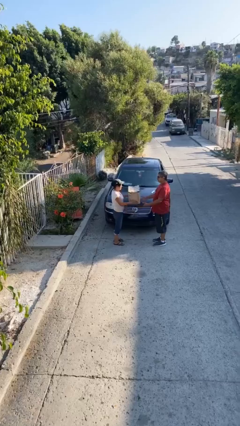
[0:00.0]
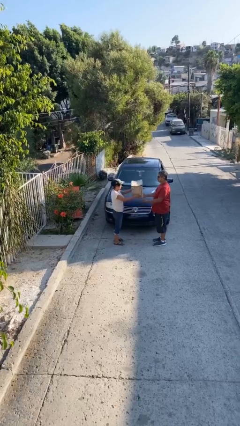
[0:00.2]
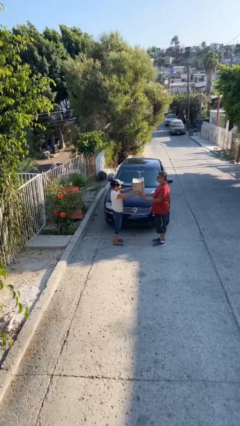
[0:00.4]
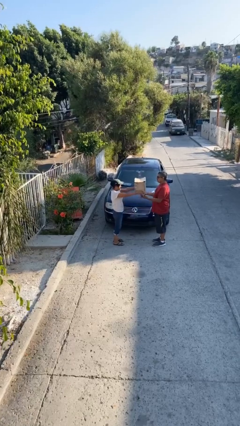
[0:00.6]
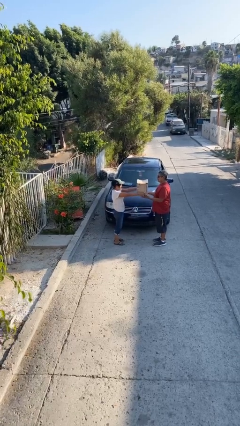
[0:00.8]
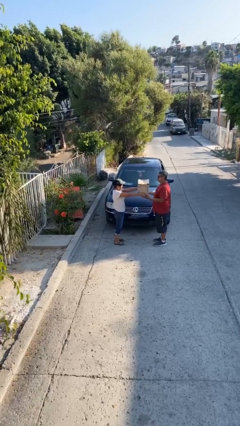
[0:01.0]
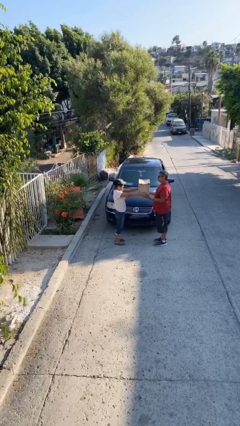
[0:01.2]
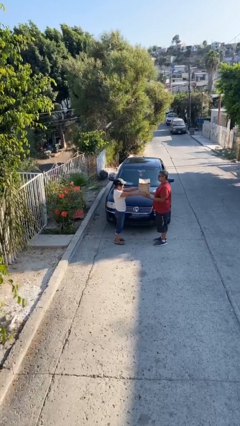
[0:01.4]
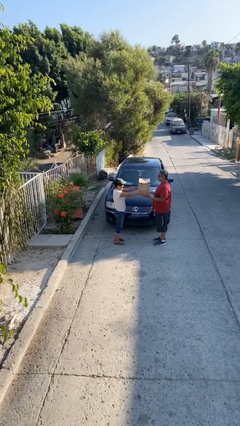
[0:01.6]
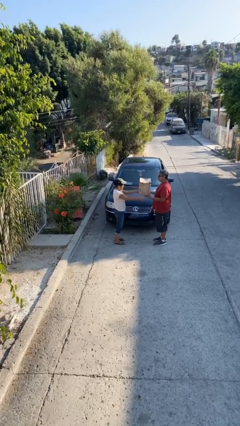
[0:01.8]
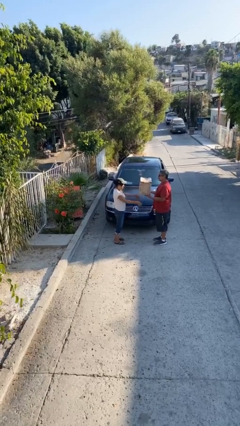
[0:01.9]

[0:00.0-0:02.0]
person transfers object to person

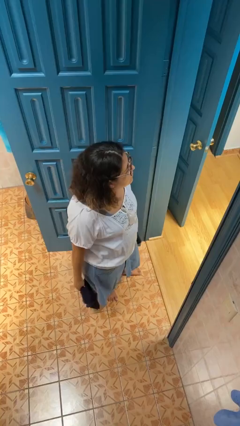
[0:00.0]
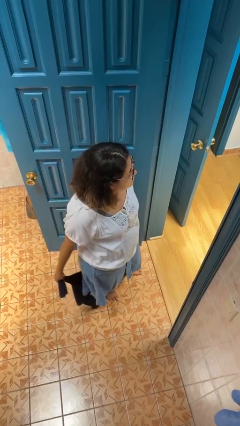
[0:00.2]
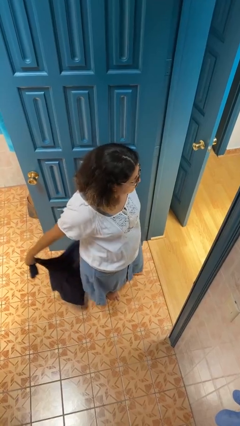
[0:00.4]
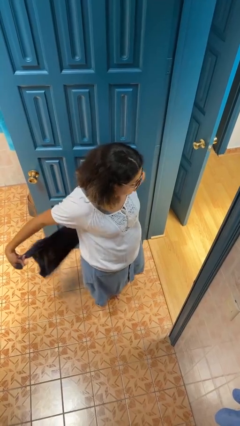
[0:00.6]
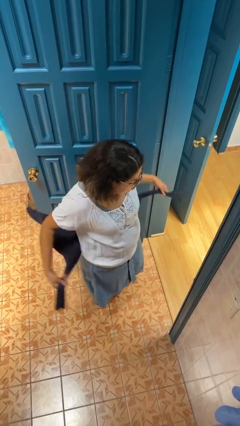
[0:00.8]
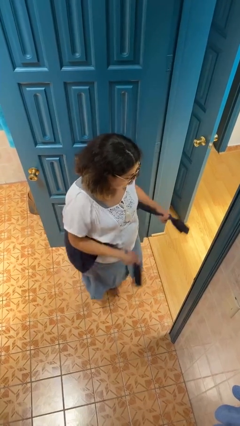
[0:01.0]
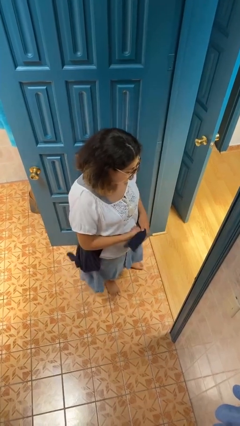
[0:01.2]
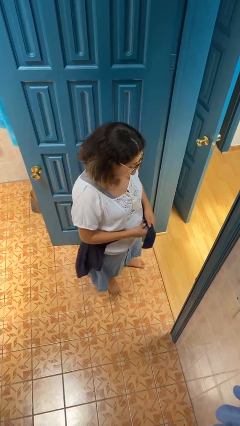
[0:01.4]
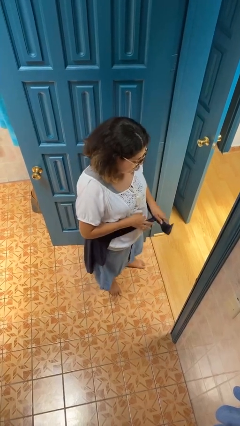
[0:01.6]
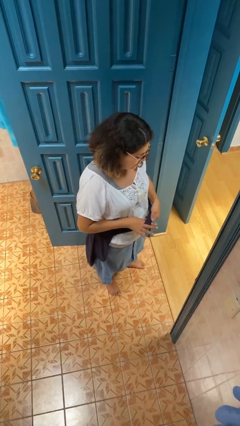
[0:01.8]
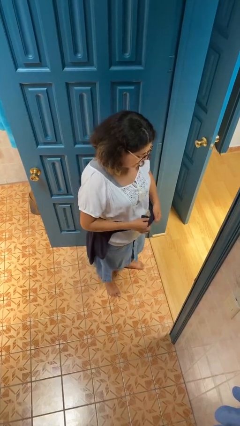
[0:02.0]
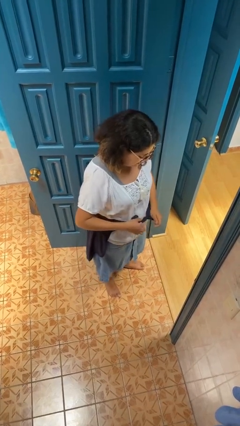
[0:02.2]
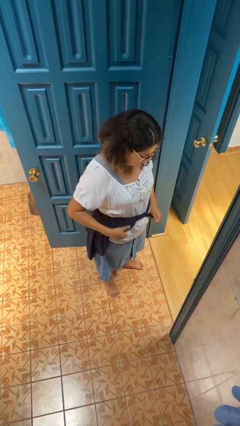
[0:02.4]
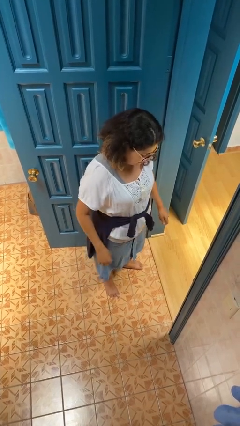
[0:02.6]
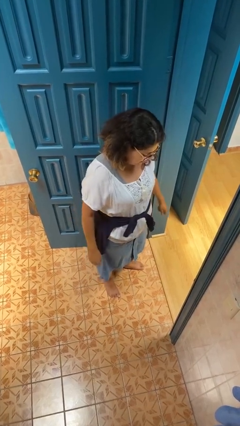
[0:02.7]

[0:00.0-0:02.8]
person ties jacket around waist

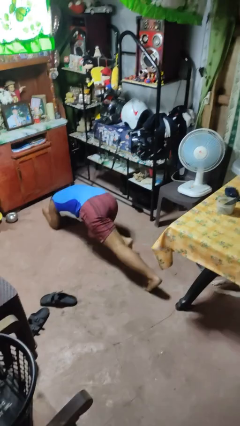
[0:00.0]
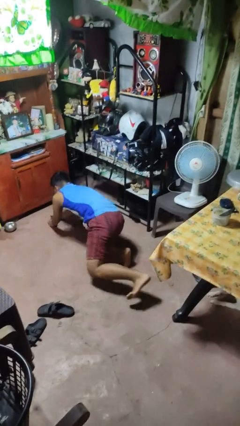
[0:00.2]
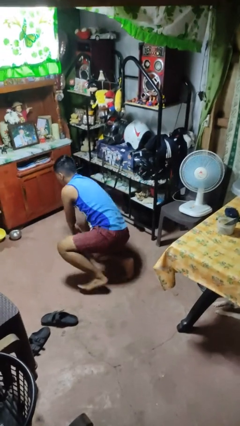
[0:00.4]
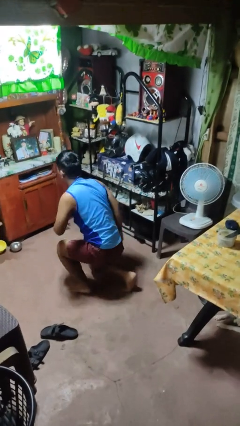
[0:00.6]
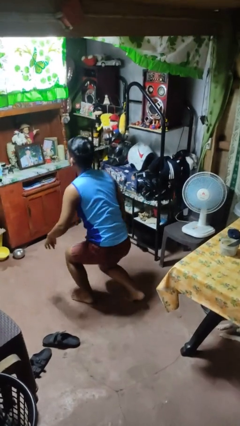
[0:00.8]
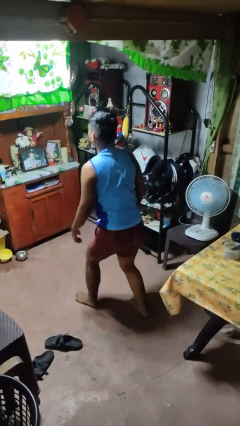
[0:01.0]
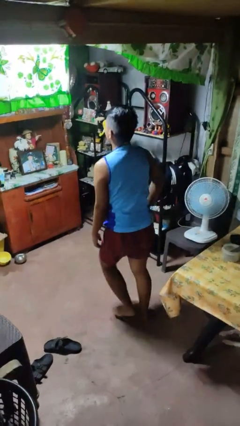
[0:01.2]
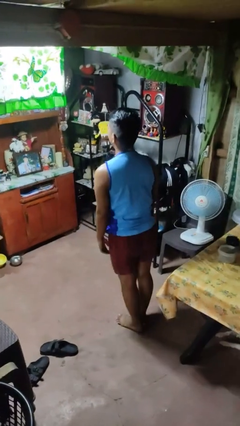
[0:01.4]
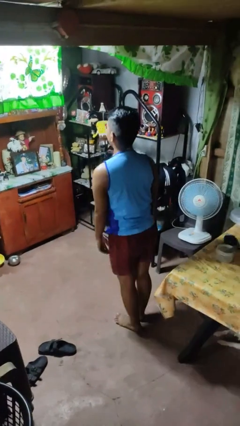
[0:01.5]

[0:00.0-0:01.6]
person stands up from floor

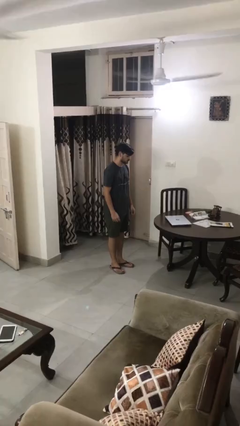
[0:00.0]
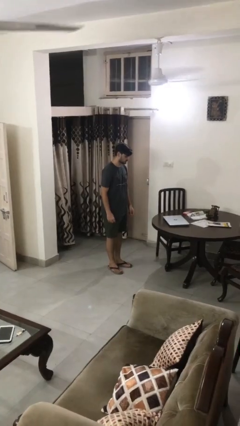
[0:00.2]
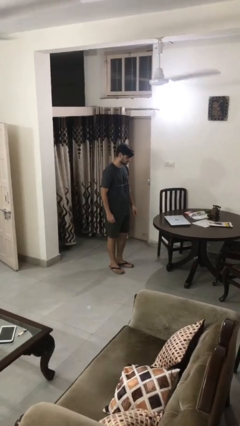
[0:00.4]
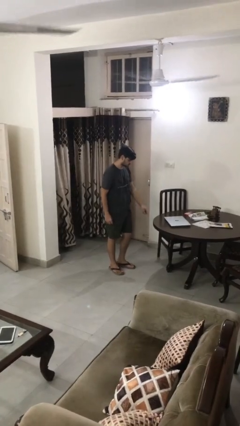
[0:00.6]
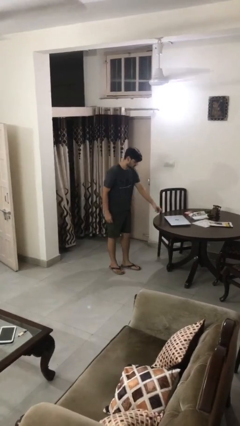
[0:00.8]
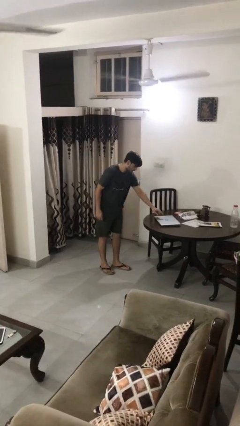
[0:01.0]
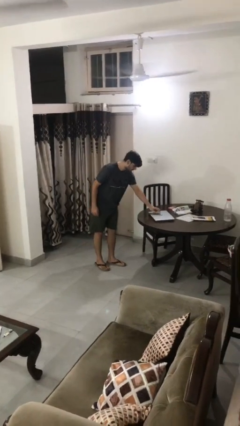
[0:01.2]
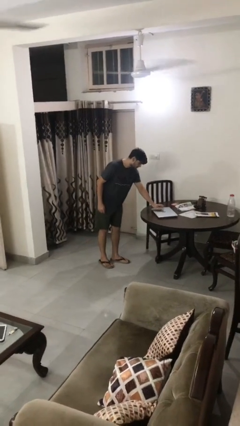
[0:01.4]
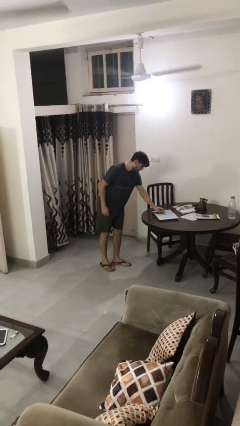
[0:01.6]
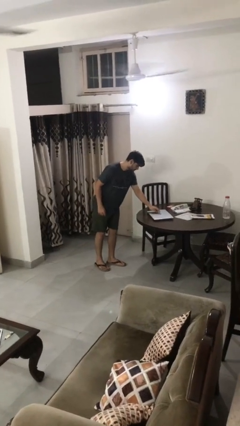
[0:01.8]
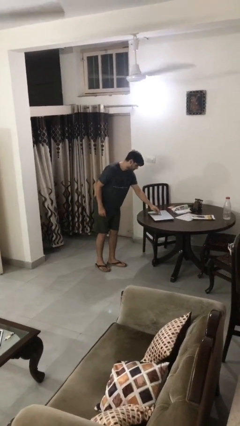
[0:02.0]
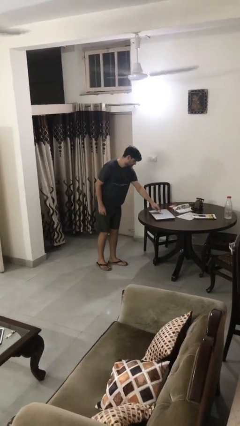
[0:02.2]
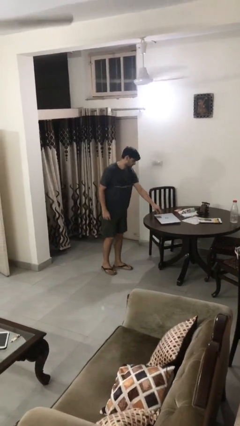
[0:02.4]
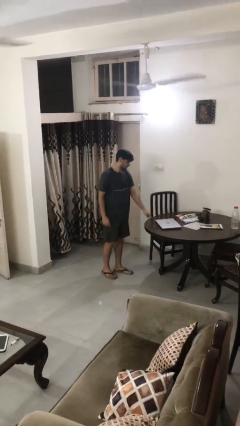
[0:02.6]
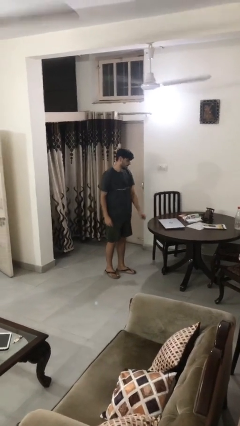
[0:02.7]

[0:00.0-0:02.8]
person taps object with finger

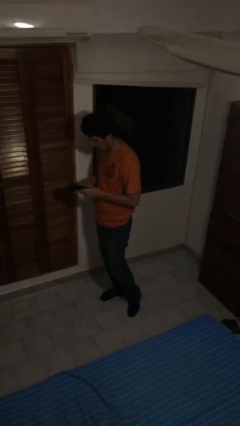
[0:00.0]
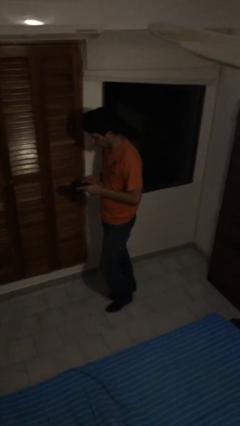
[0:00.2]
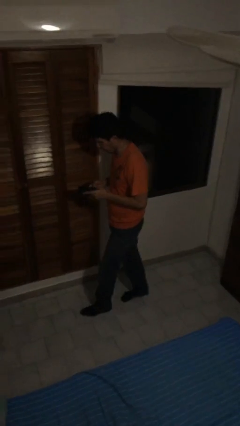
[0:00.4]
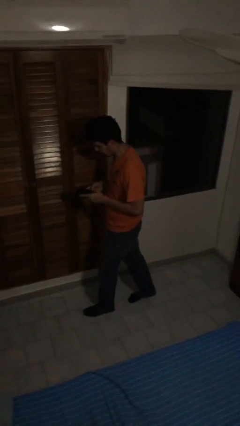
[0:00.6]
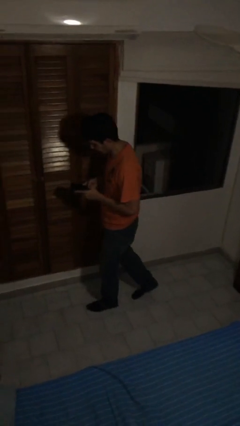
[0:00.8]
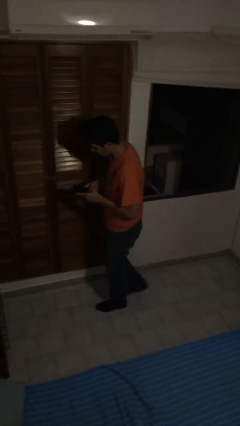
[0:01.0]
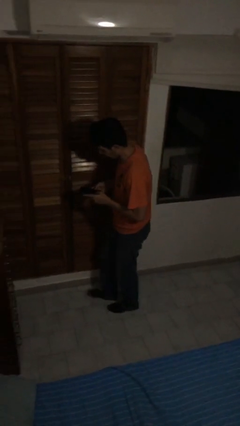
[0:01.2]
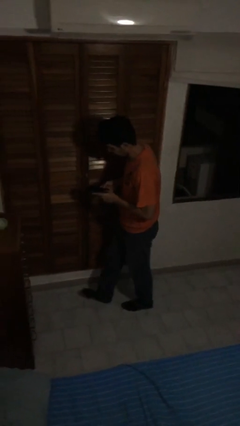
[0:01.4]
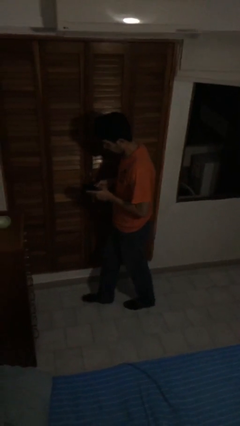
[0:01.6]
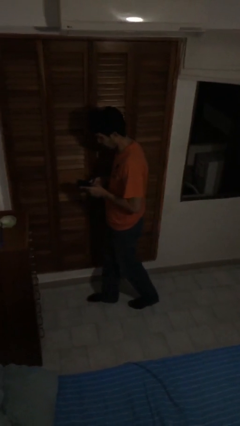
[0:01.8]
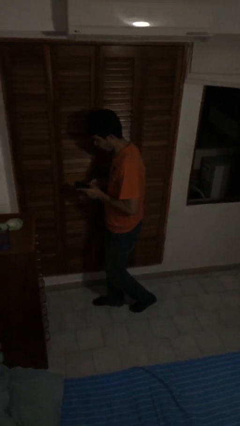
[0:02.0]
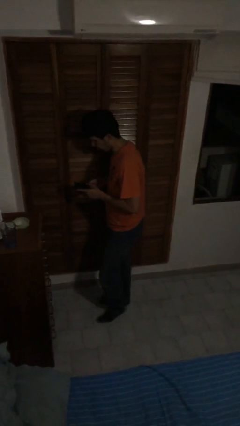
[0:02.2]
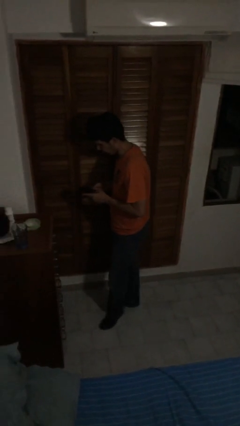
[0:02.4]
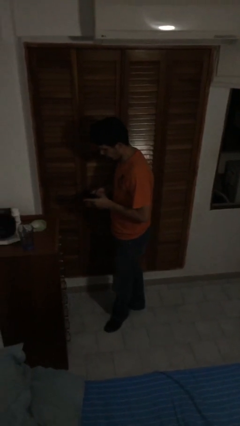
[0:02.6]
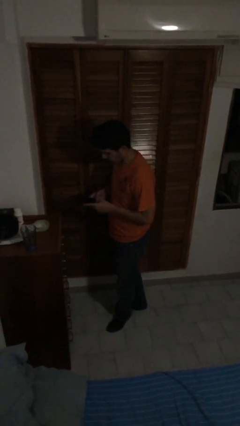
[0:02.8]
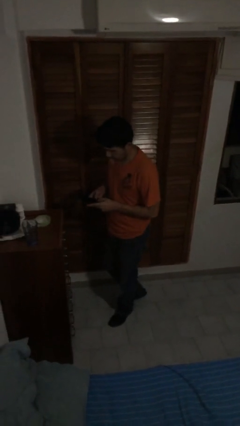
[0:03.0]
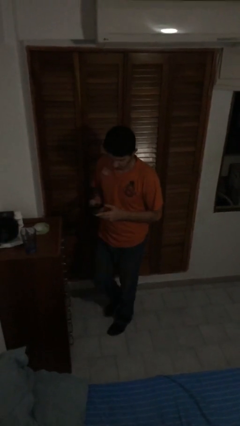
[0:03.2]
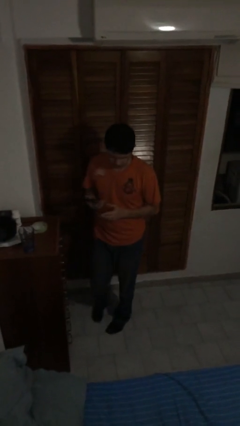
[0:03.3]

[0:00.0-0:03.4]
person texts on phone

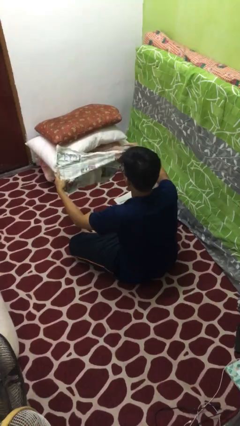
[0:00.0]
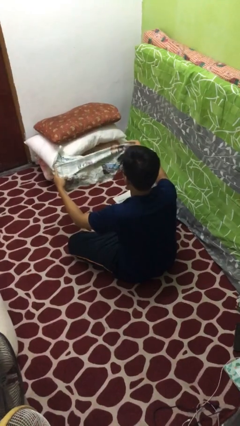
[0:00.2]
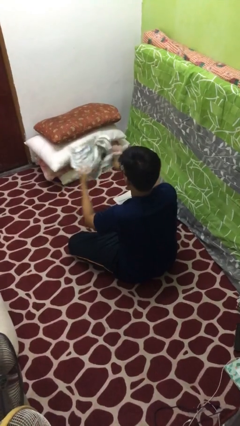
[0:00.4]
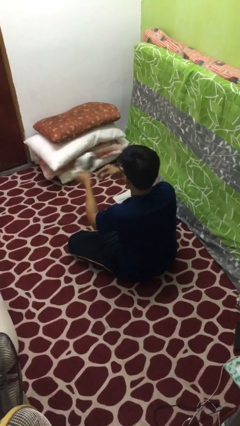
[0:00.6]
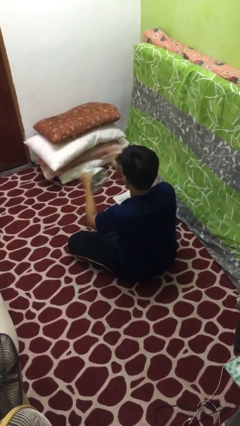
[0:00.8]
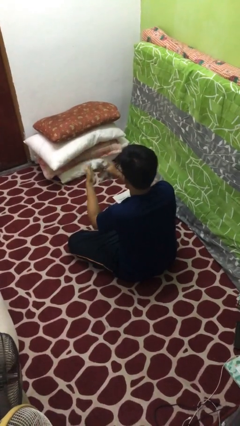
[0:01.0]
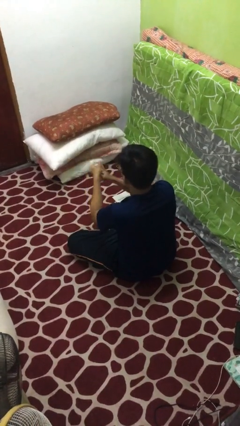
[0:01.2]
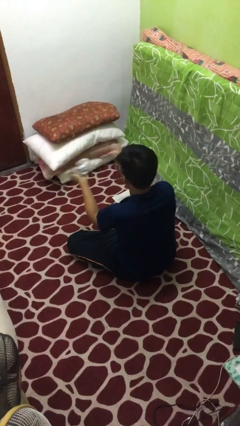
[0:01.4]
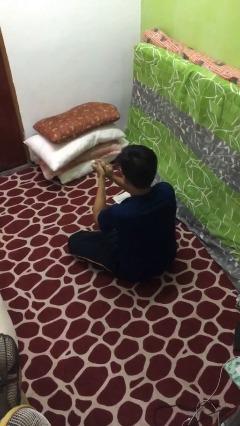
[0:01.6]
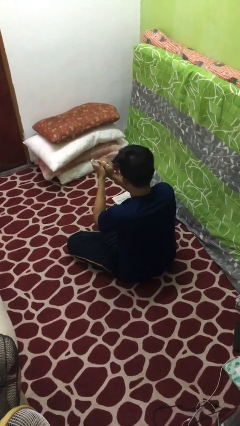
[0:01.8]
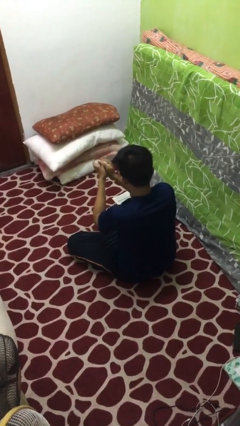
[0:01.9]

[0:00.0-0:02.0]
person crumples paper

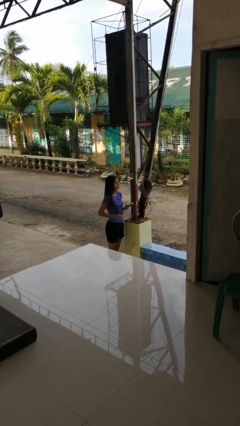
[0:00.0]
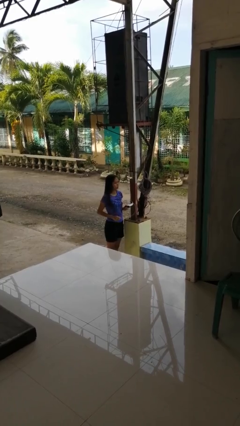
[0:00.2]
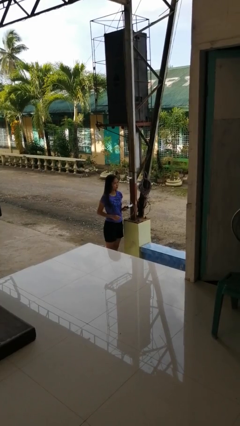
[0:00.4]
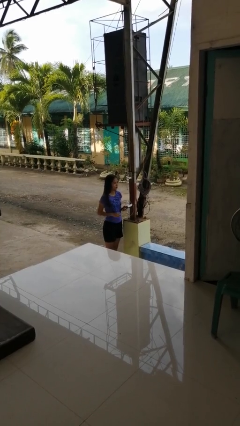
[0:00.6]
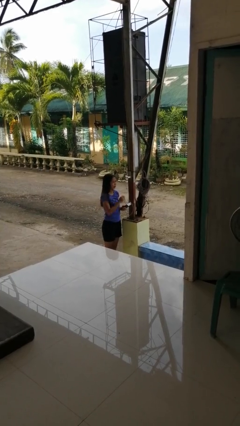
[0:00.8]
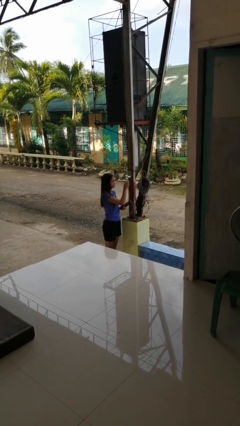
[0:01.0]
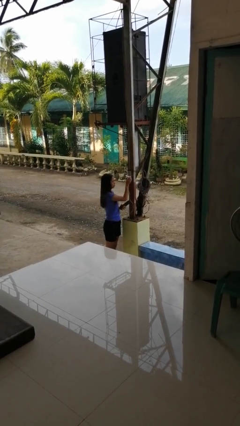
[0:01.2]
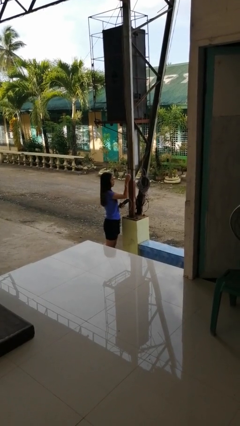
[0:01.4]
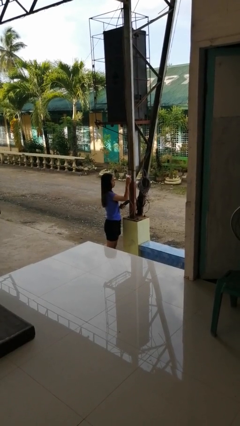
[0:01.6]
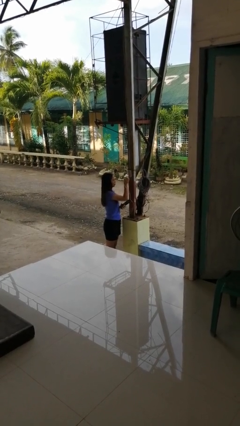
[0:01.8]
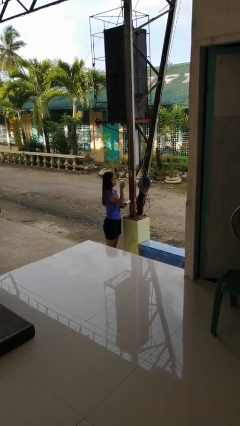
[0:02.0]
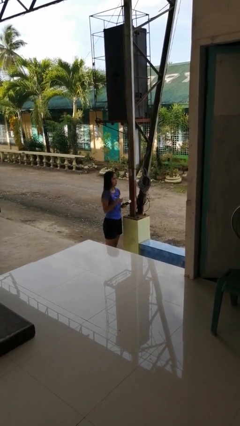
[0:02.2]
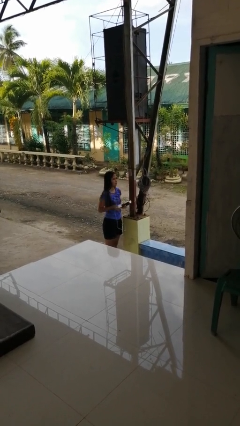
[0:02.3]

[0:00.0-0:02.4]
person unplugs from electrical socket
